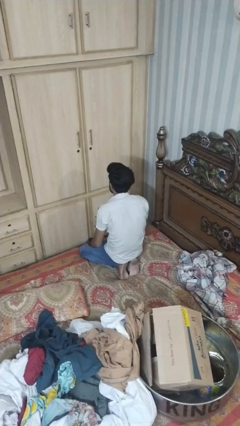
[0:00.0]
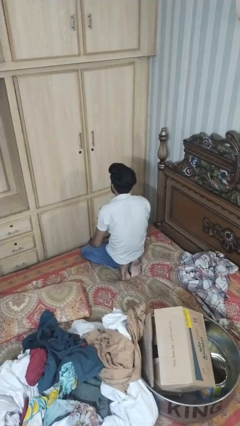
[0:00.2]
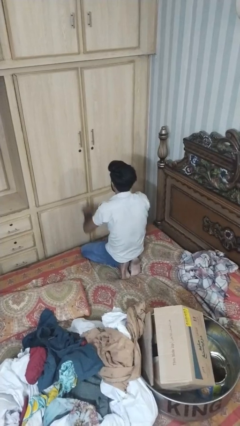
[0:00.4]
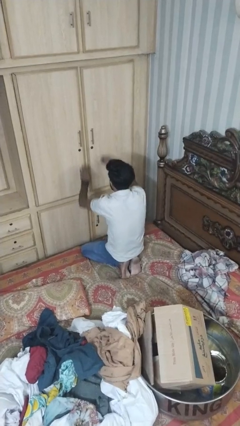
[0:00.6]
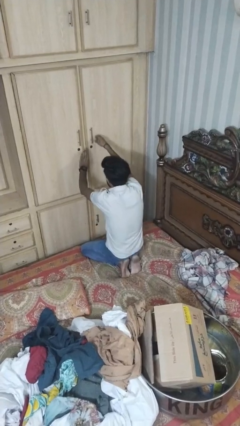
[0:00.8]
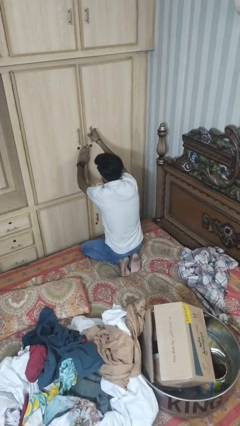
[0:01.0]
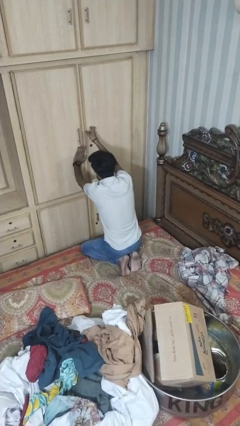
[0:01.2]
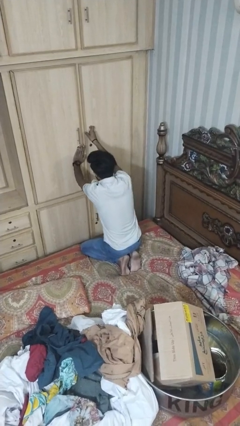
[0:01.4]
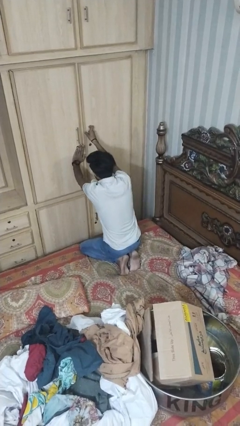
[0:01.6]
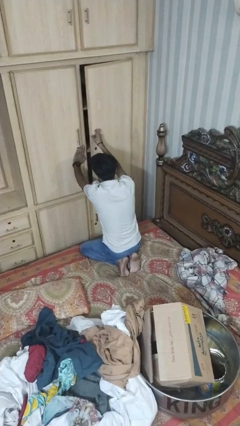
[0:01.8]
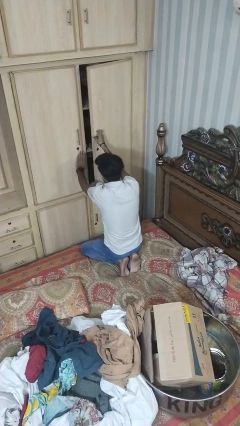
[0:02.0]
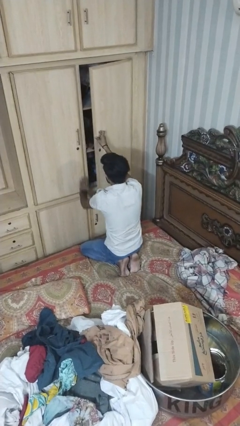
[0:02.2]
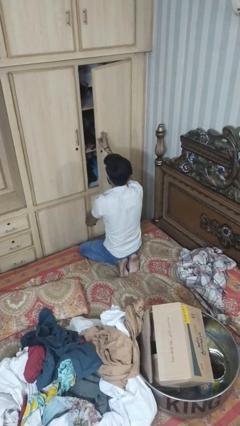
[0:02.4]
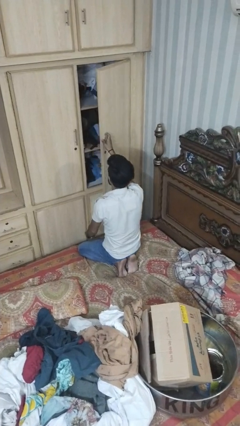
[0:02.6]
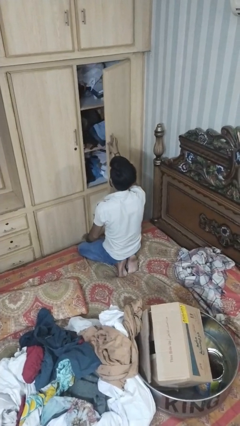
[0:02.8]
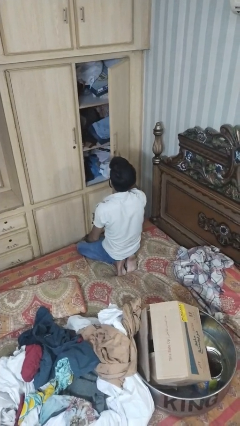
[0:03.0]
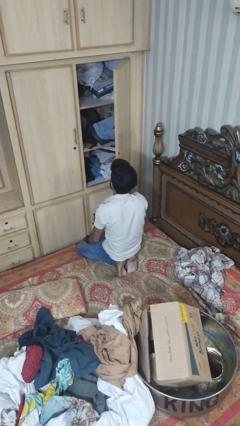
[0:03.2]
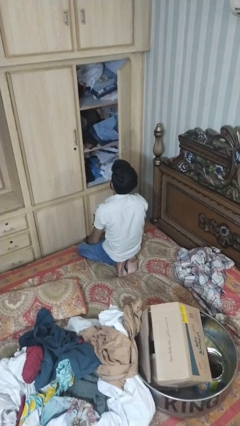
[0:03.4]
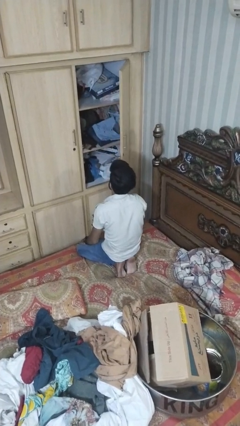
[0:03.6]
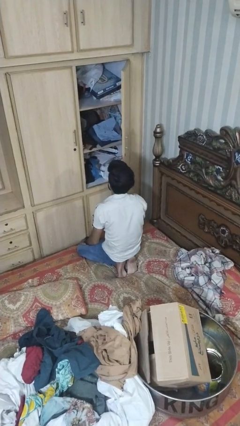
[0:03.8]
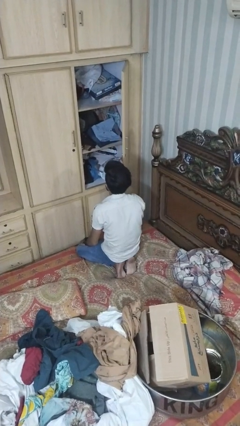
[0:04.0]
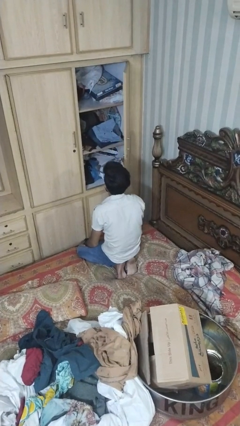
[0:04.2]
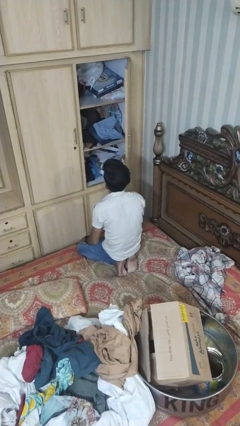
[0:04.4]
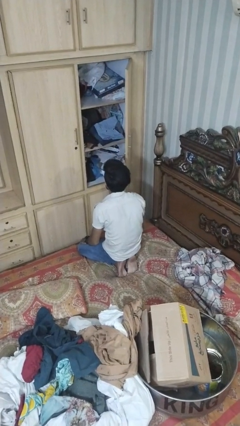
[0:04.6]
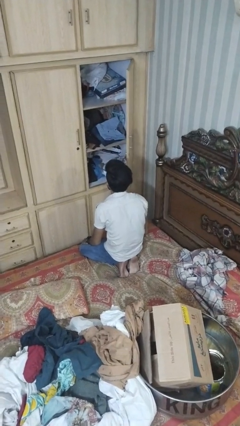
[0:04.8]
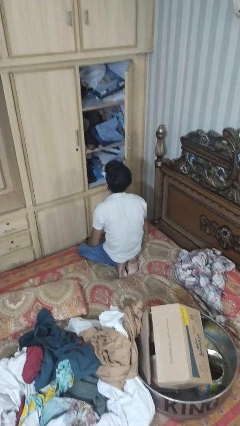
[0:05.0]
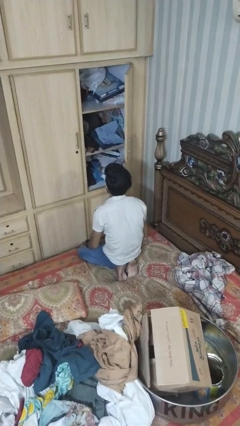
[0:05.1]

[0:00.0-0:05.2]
person opens dresser drawer

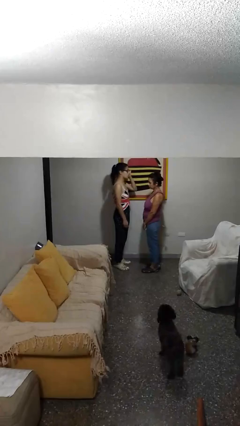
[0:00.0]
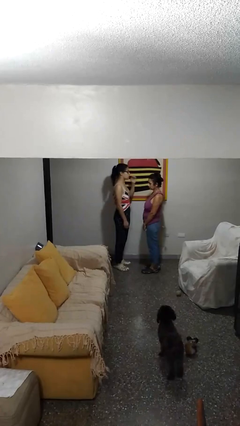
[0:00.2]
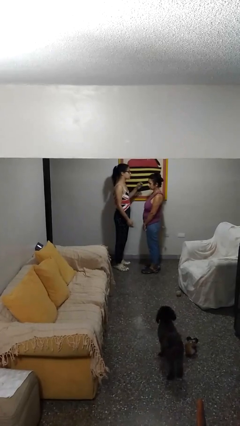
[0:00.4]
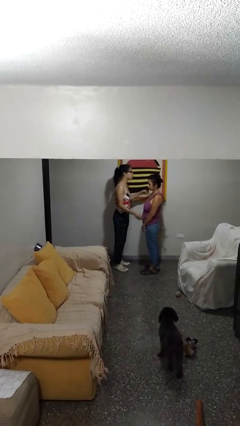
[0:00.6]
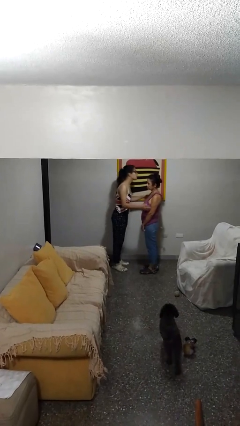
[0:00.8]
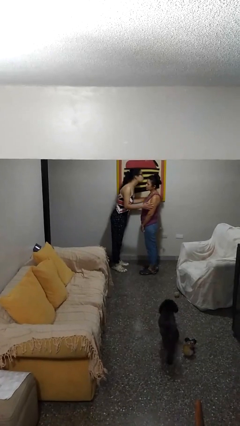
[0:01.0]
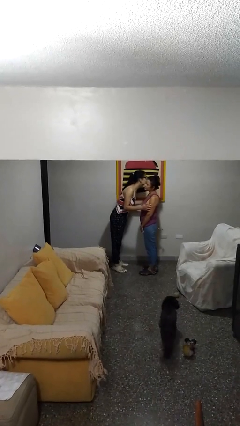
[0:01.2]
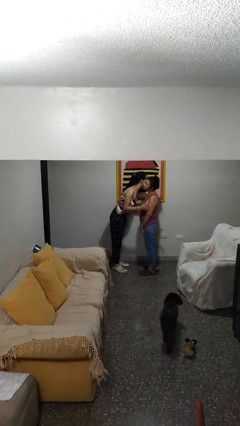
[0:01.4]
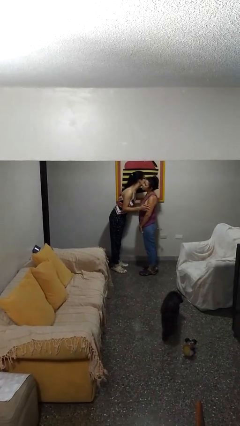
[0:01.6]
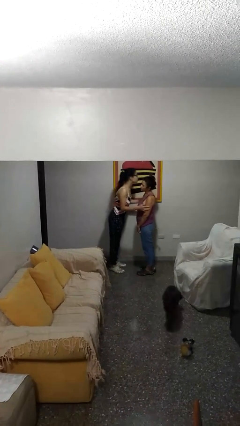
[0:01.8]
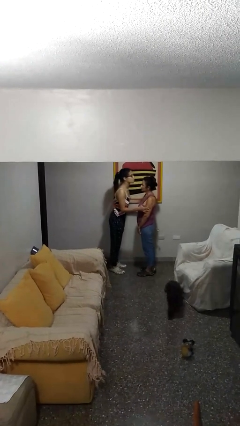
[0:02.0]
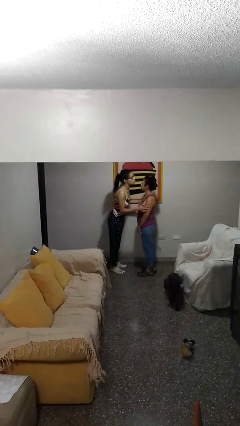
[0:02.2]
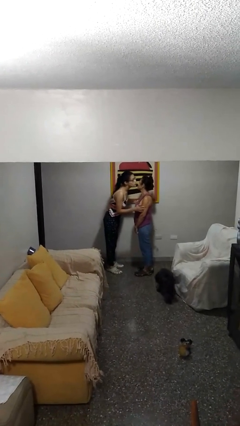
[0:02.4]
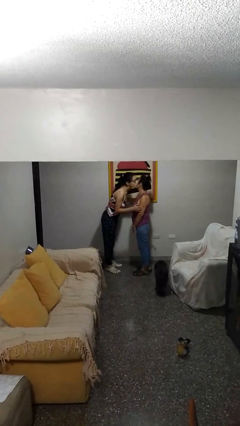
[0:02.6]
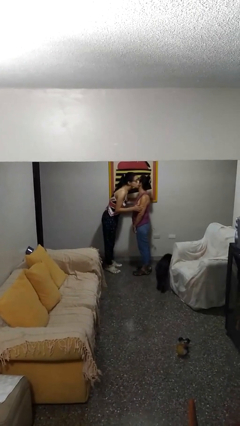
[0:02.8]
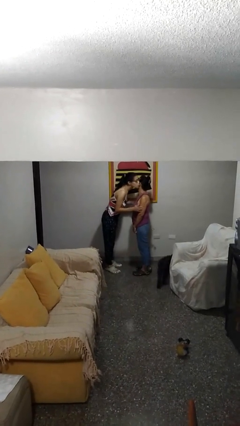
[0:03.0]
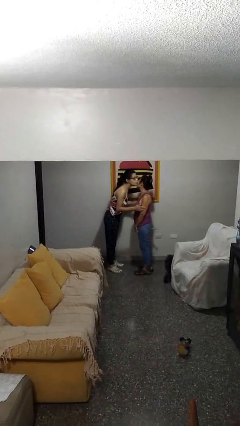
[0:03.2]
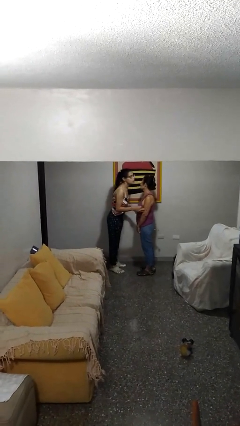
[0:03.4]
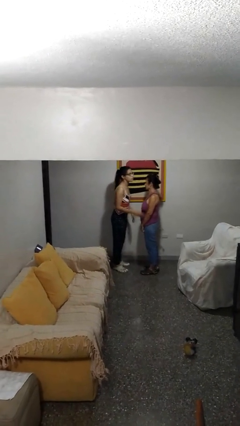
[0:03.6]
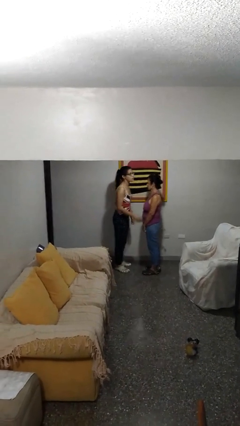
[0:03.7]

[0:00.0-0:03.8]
person kisses cheek of person

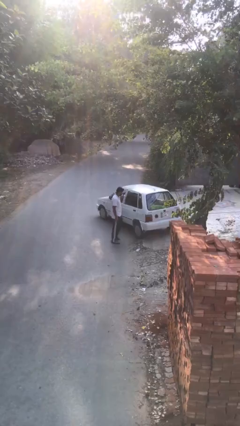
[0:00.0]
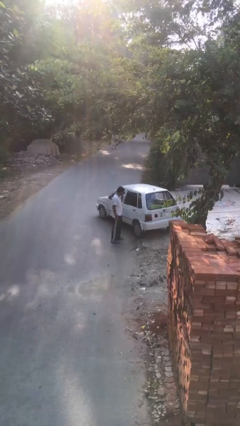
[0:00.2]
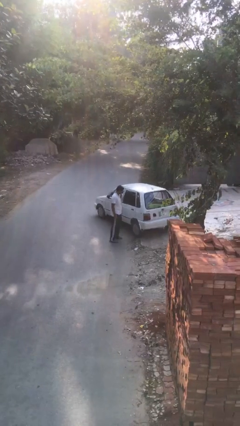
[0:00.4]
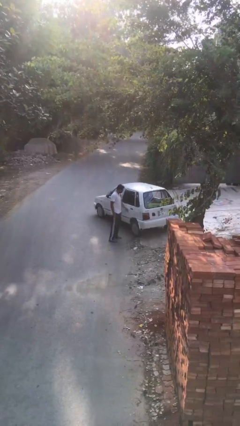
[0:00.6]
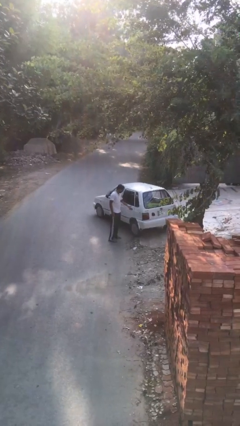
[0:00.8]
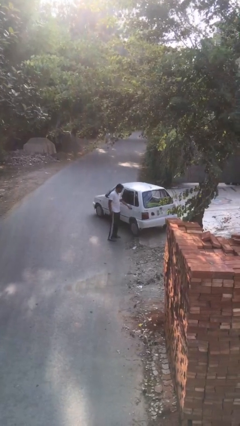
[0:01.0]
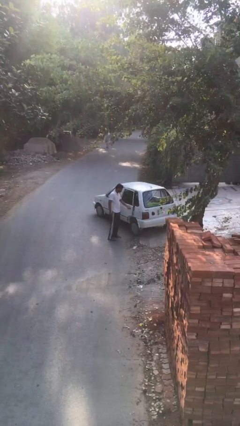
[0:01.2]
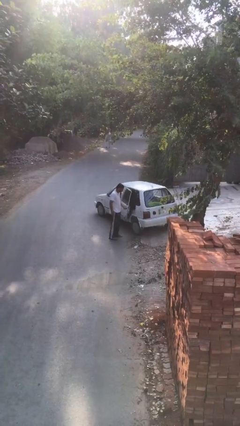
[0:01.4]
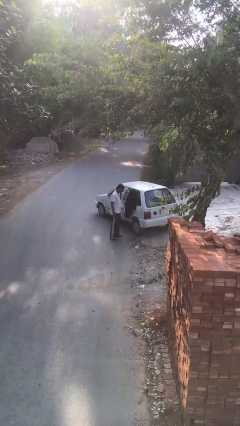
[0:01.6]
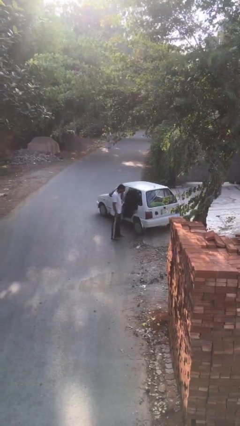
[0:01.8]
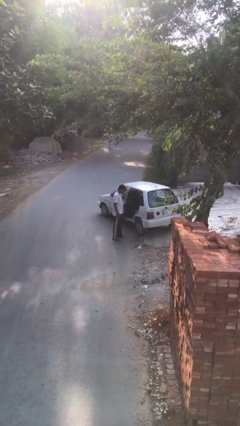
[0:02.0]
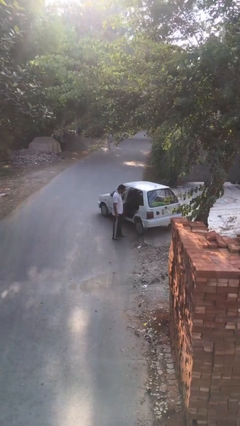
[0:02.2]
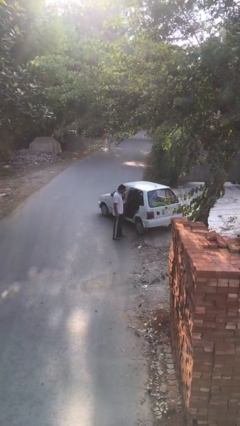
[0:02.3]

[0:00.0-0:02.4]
person opens car door

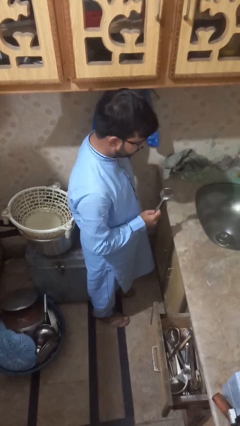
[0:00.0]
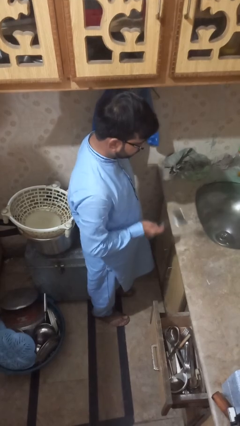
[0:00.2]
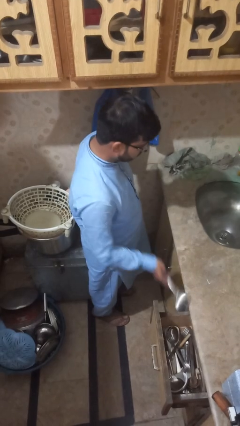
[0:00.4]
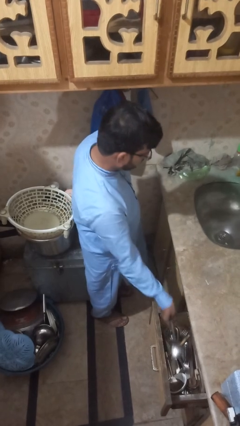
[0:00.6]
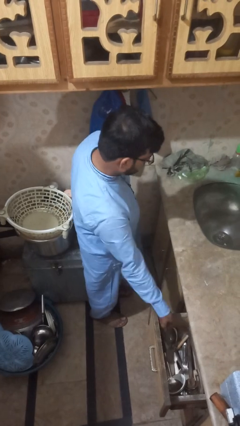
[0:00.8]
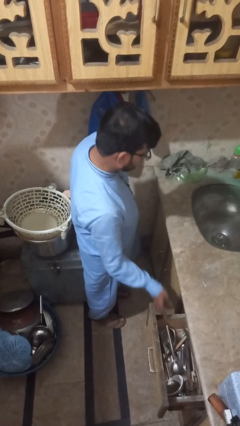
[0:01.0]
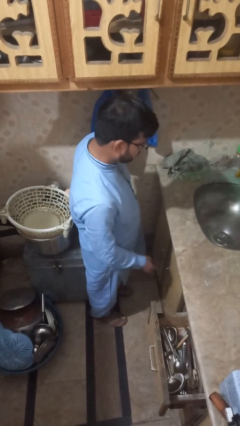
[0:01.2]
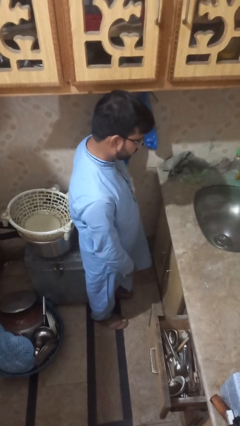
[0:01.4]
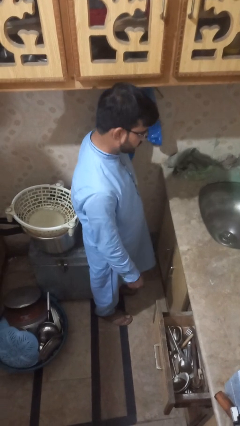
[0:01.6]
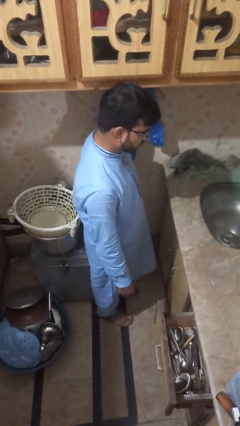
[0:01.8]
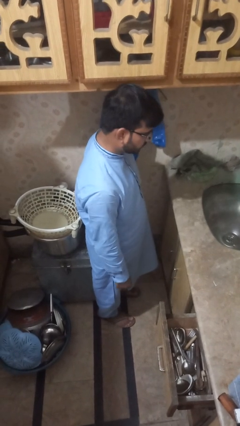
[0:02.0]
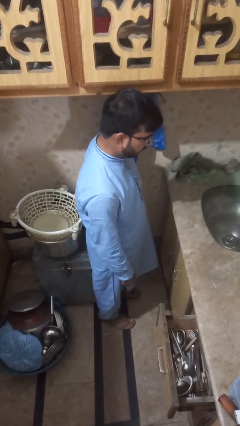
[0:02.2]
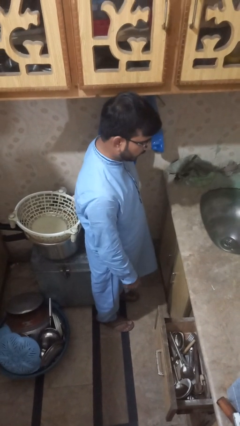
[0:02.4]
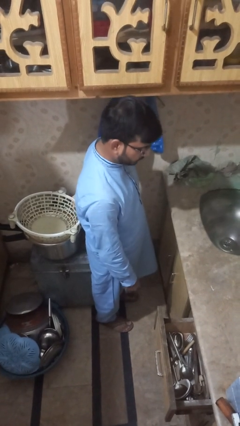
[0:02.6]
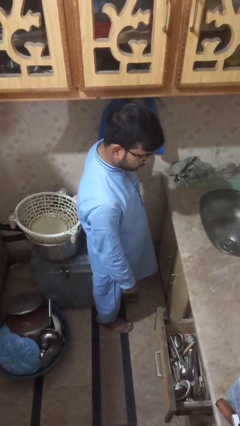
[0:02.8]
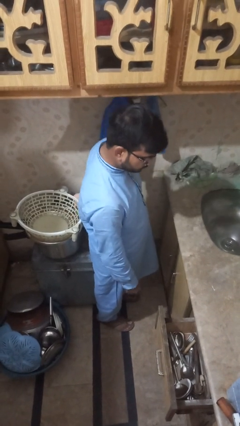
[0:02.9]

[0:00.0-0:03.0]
person puts object into kitchen drawer

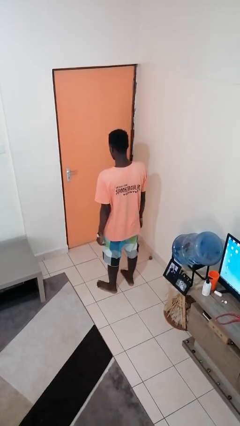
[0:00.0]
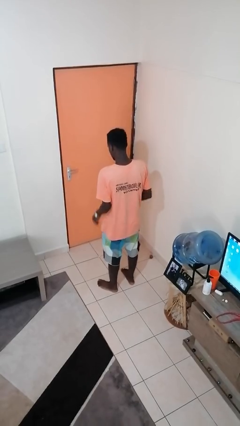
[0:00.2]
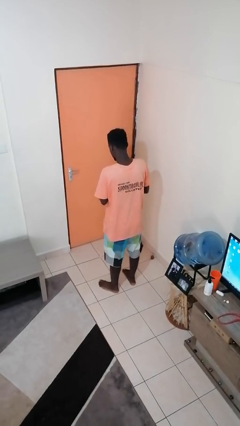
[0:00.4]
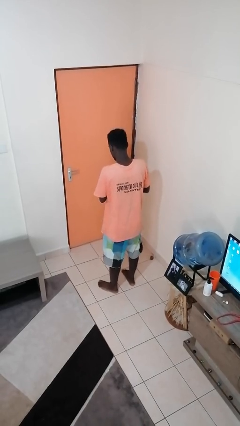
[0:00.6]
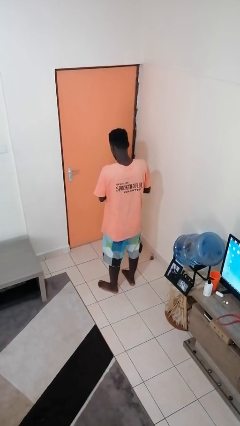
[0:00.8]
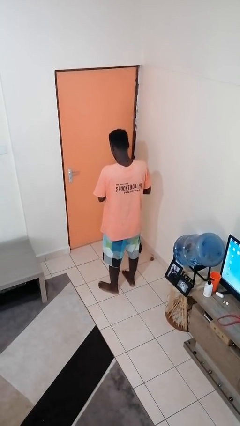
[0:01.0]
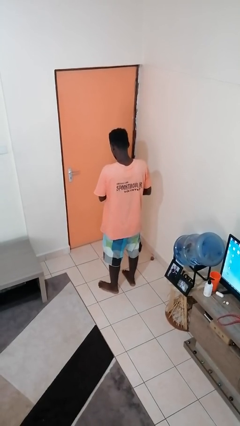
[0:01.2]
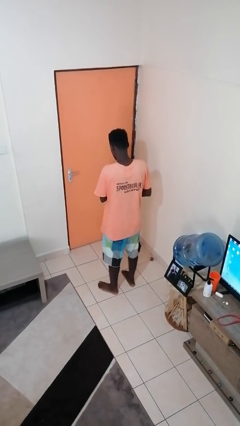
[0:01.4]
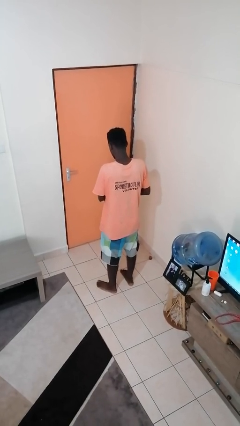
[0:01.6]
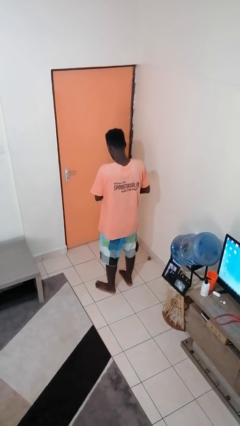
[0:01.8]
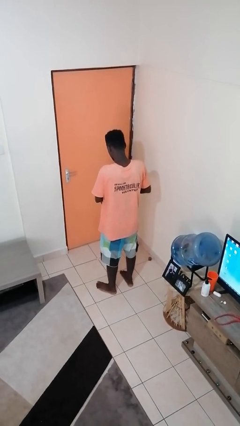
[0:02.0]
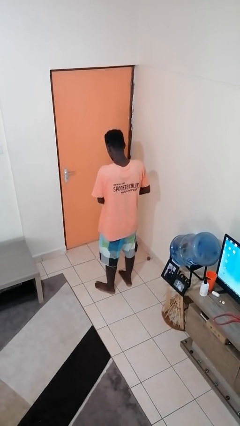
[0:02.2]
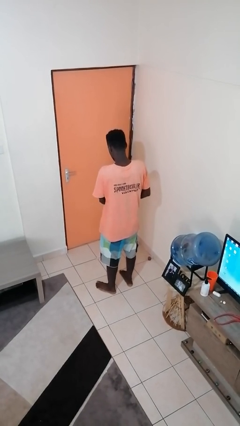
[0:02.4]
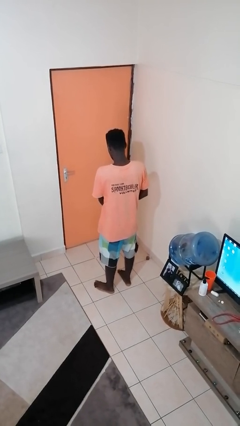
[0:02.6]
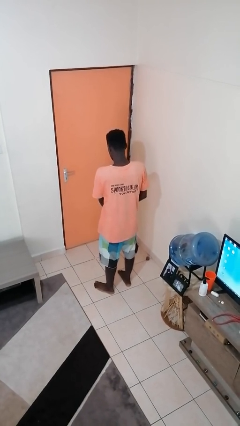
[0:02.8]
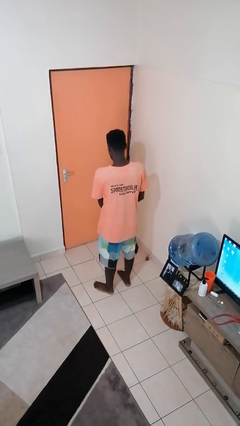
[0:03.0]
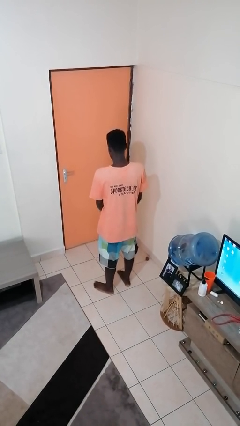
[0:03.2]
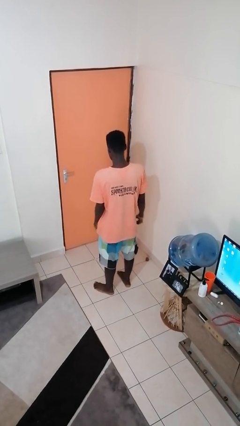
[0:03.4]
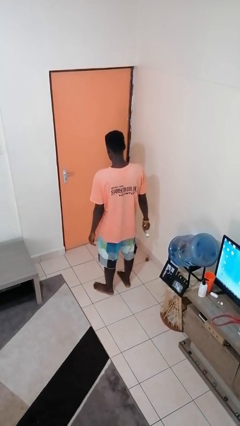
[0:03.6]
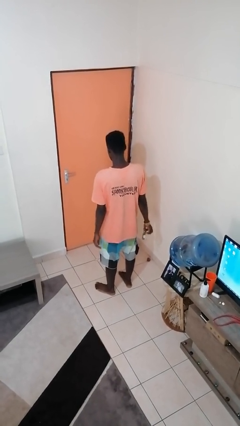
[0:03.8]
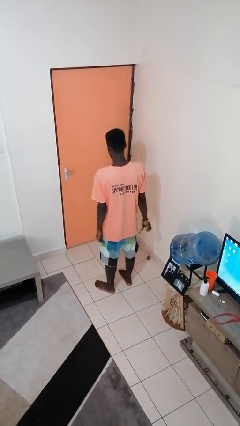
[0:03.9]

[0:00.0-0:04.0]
person takes off wristwatch
